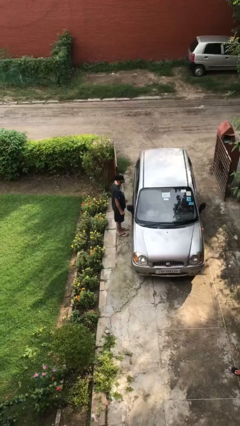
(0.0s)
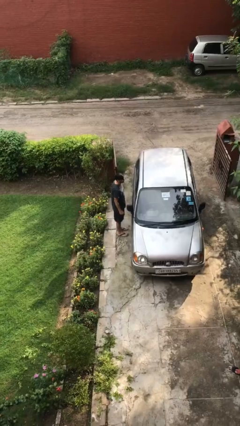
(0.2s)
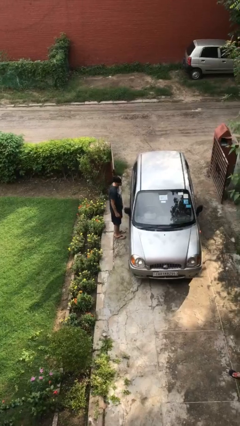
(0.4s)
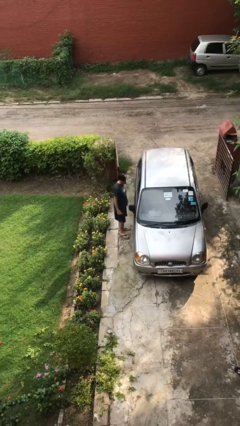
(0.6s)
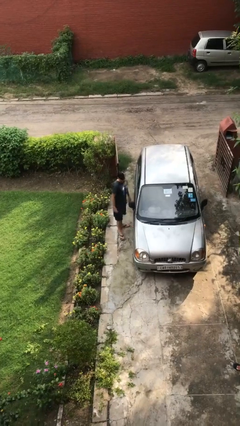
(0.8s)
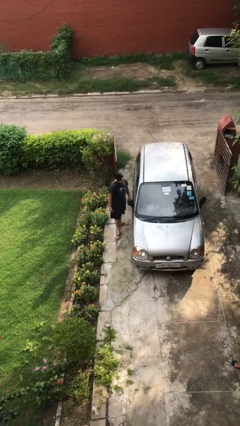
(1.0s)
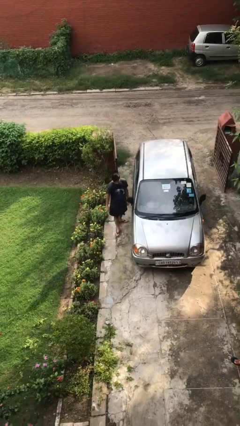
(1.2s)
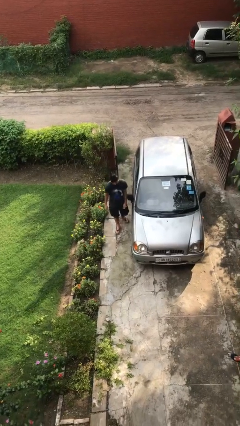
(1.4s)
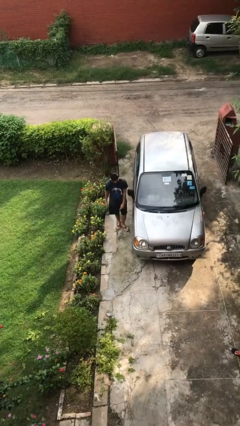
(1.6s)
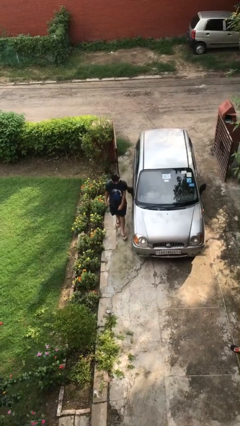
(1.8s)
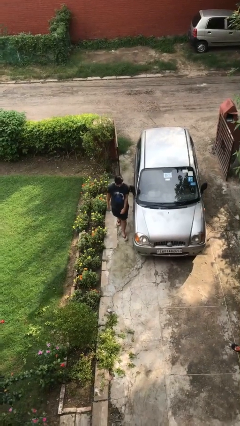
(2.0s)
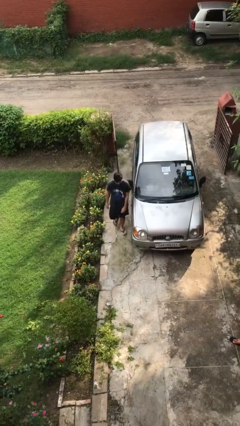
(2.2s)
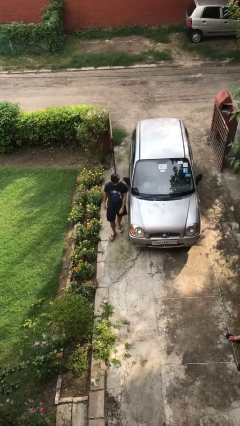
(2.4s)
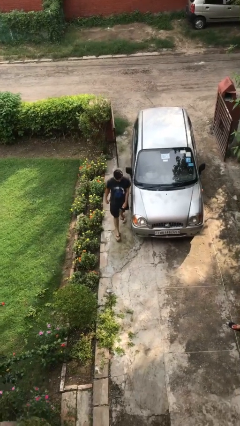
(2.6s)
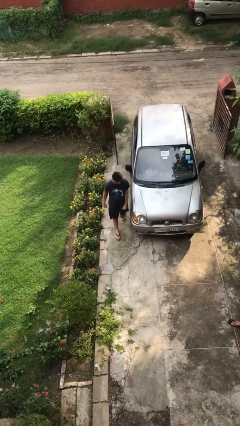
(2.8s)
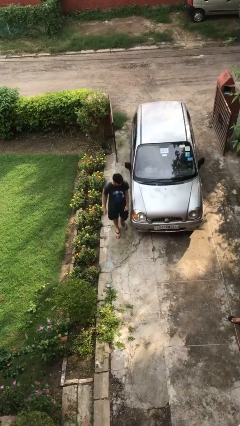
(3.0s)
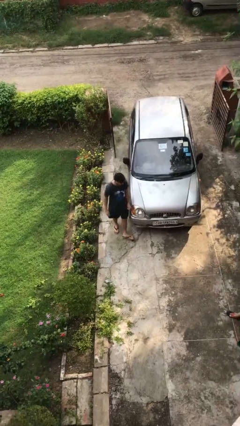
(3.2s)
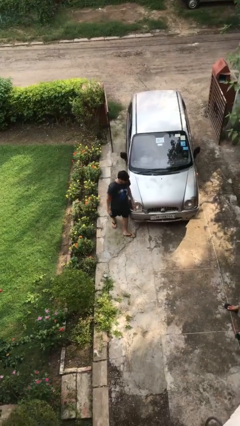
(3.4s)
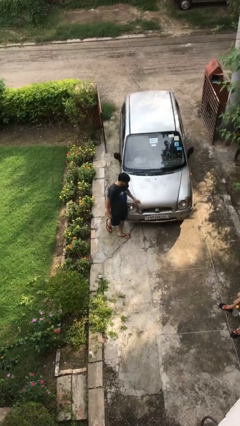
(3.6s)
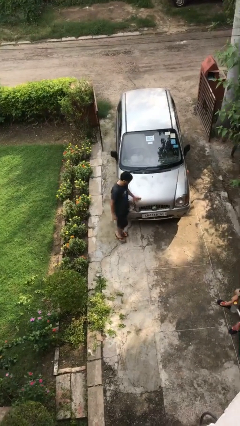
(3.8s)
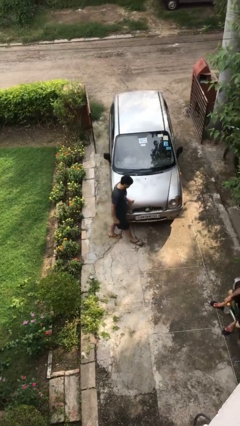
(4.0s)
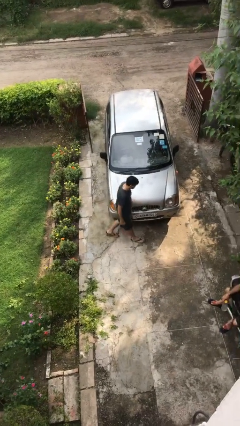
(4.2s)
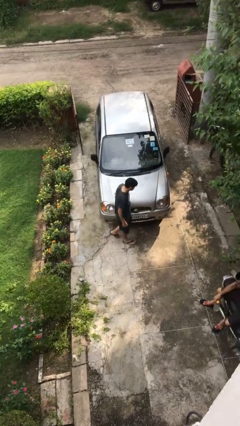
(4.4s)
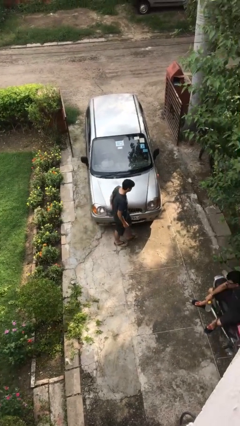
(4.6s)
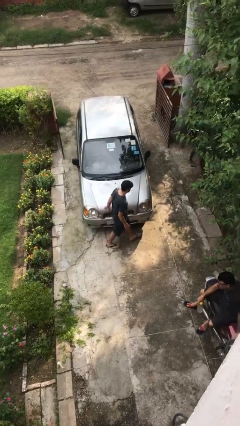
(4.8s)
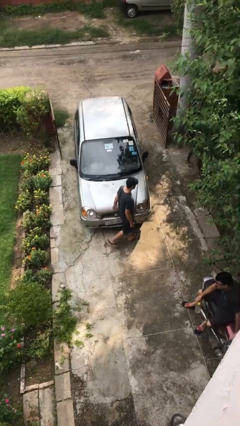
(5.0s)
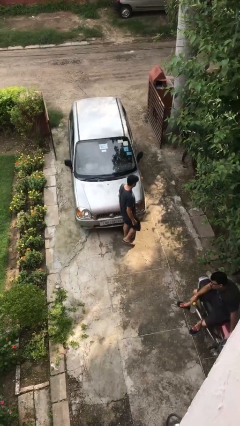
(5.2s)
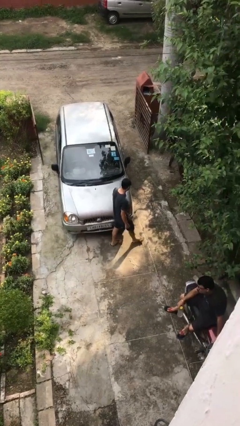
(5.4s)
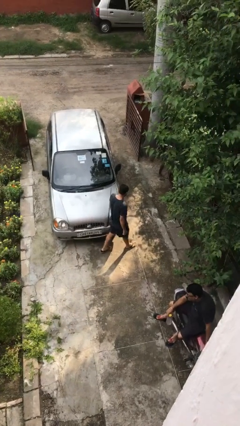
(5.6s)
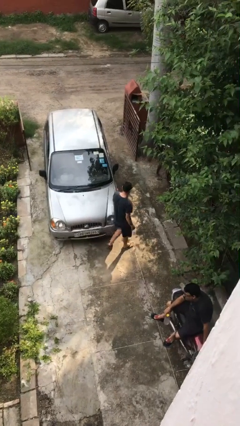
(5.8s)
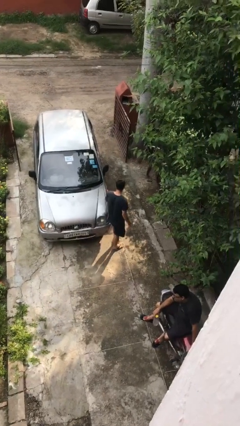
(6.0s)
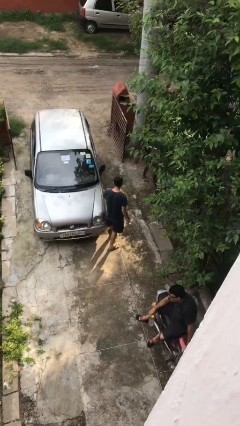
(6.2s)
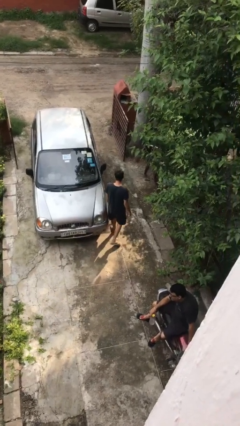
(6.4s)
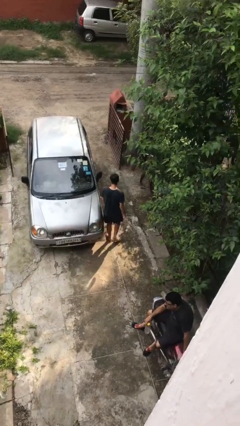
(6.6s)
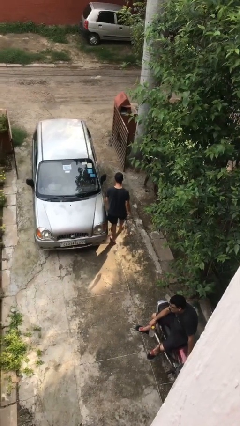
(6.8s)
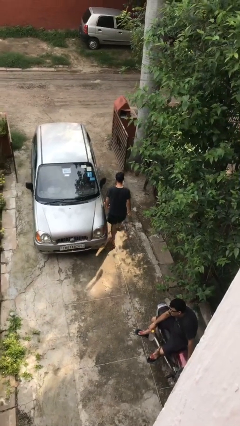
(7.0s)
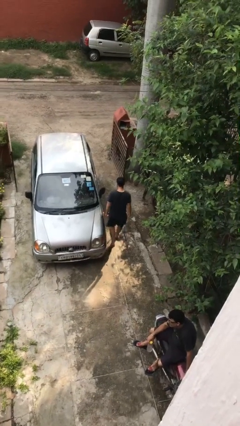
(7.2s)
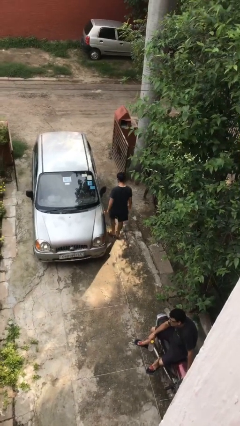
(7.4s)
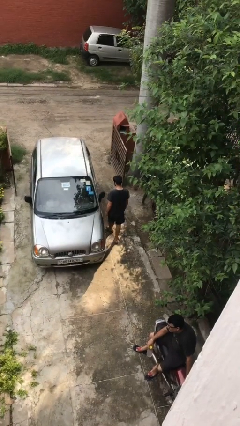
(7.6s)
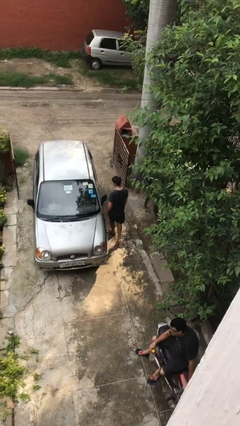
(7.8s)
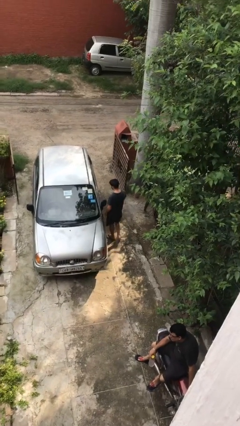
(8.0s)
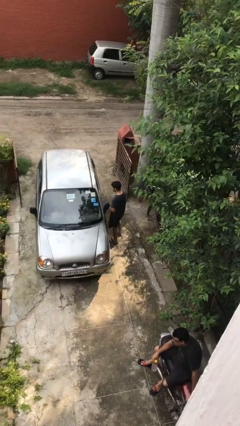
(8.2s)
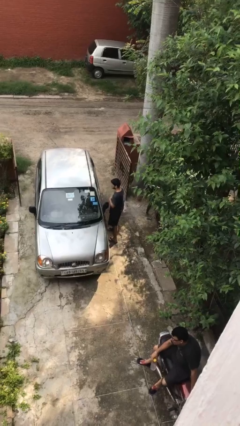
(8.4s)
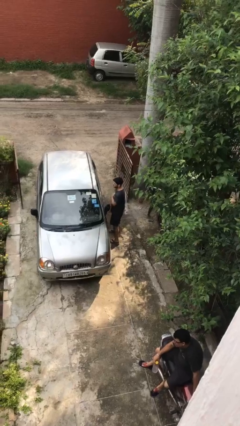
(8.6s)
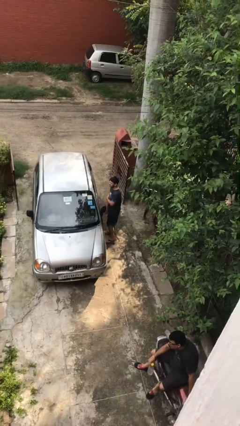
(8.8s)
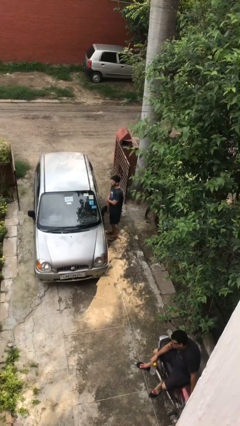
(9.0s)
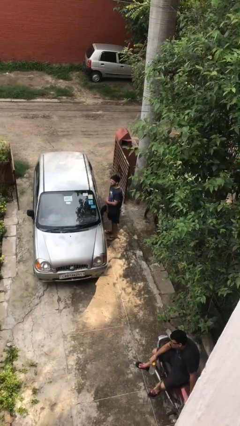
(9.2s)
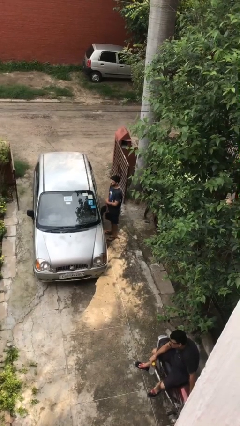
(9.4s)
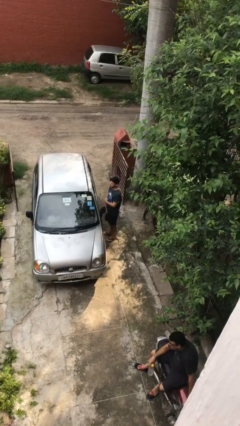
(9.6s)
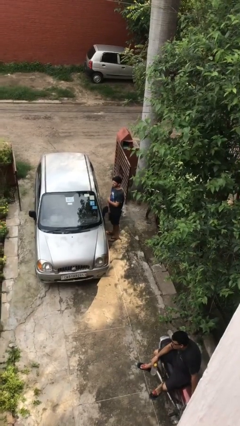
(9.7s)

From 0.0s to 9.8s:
person walks around car

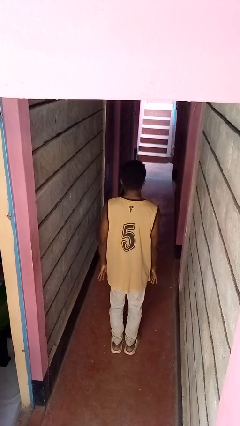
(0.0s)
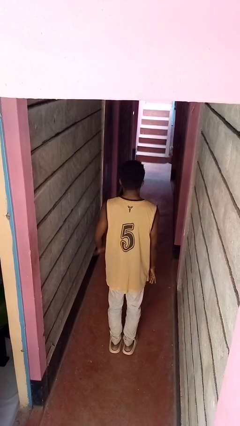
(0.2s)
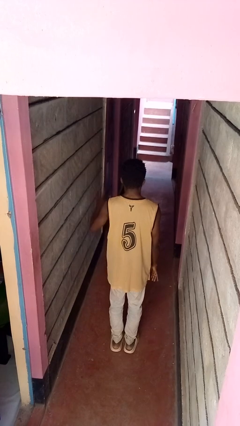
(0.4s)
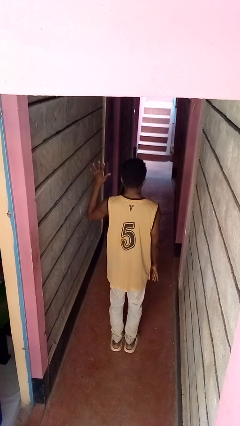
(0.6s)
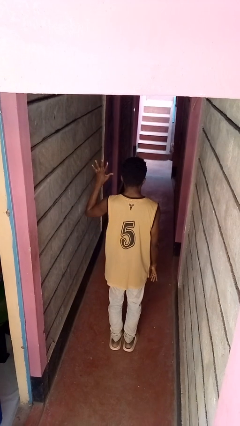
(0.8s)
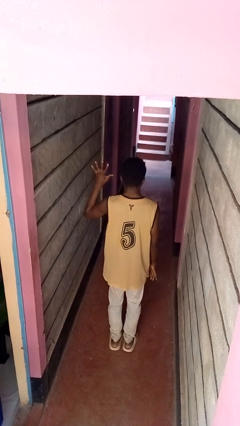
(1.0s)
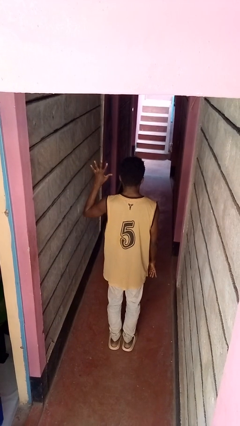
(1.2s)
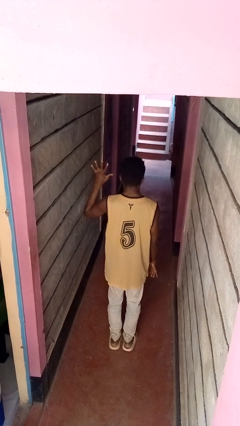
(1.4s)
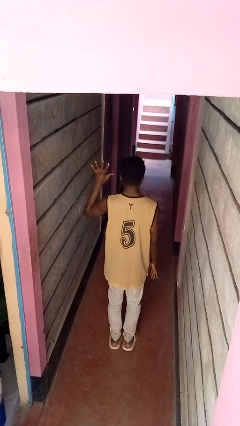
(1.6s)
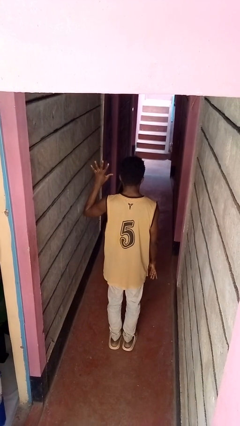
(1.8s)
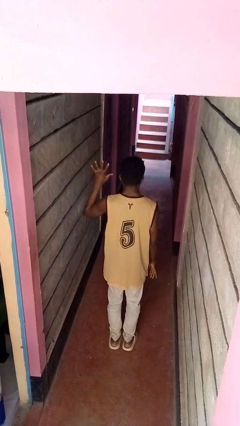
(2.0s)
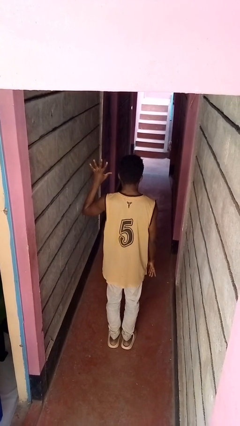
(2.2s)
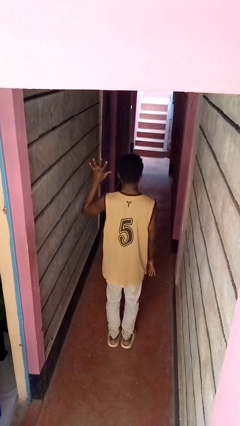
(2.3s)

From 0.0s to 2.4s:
person gestures number five

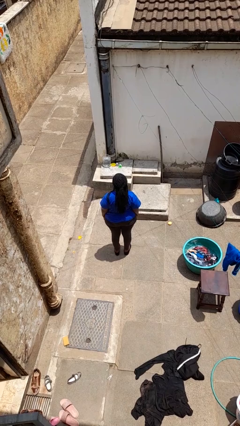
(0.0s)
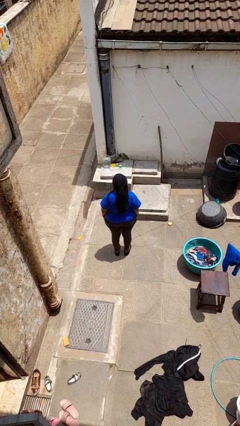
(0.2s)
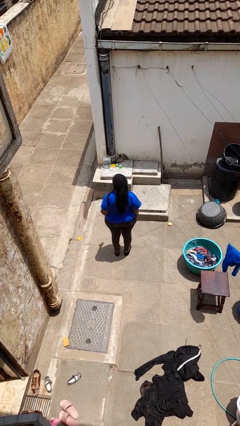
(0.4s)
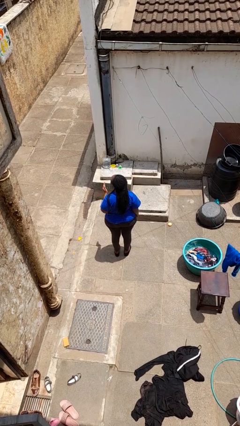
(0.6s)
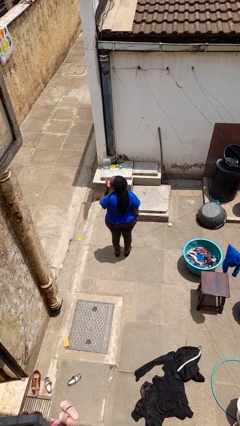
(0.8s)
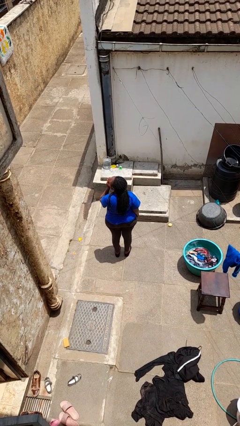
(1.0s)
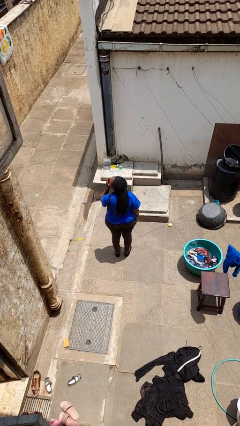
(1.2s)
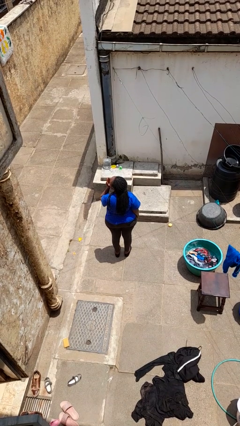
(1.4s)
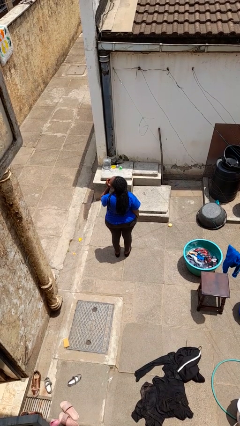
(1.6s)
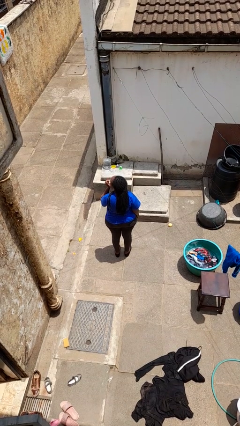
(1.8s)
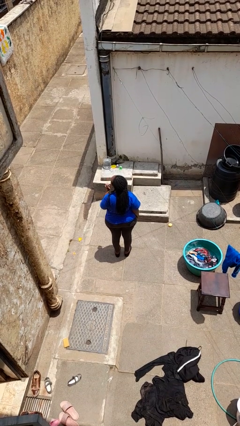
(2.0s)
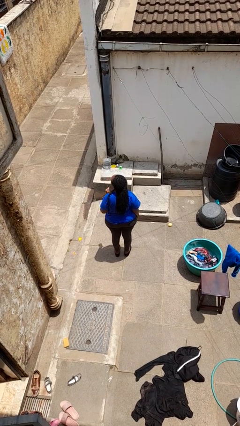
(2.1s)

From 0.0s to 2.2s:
person yawns

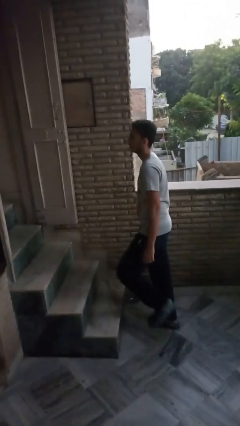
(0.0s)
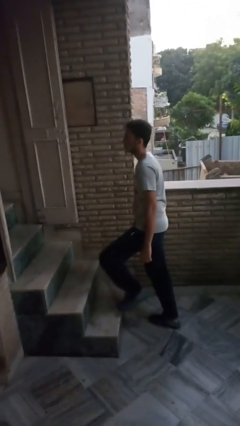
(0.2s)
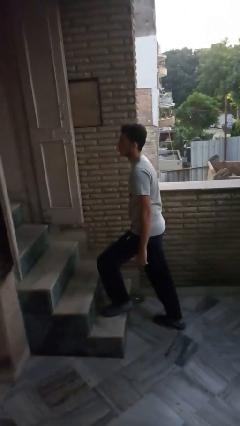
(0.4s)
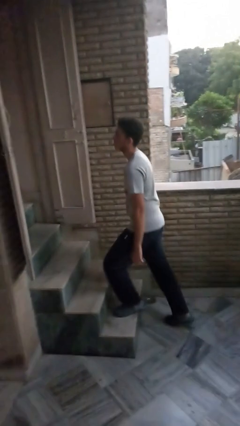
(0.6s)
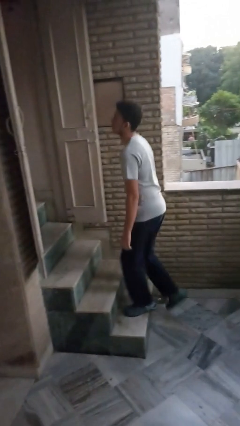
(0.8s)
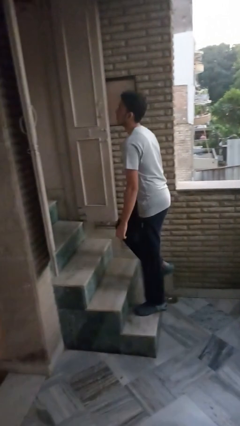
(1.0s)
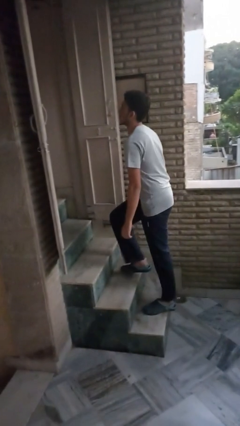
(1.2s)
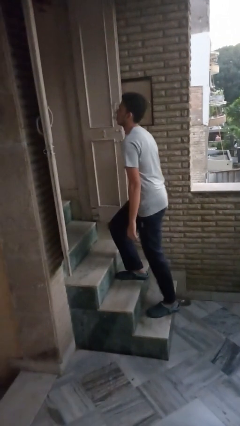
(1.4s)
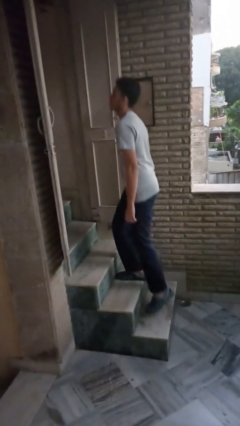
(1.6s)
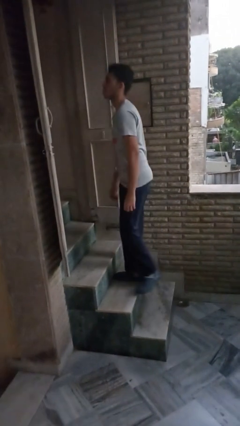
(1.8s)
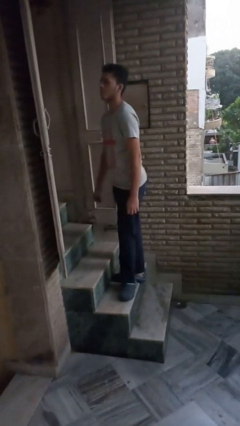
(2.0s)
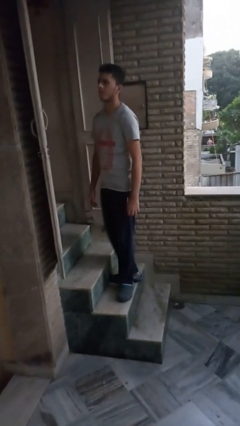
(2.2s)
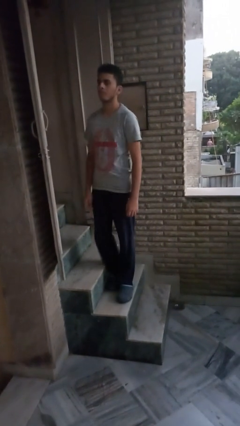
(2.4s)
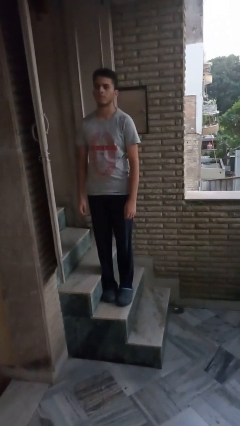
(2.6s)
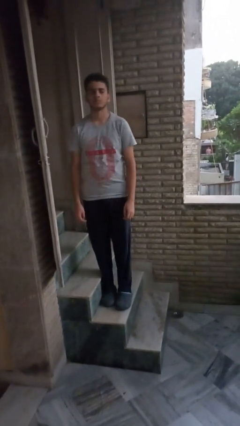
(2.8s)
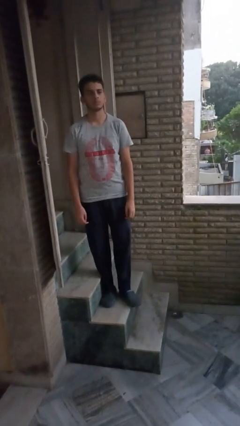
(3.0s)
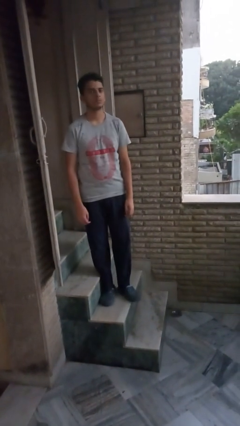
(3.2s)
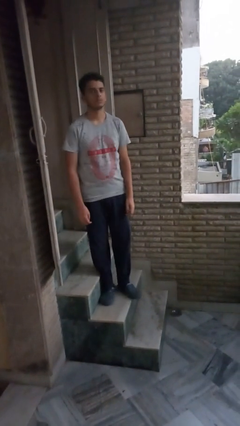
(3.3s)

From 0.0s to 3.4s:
person climbs up stairs
